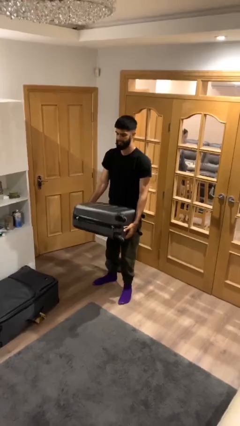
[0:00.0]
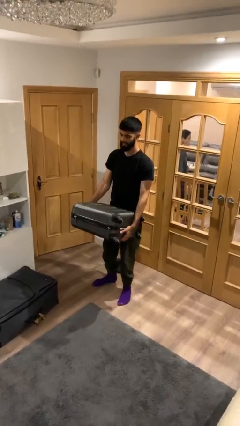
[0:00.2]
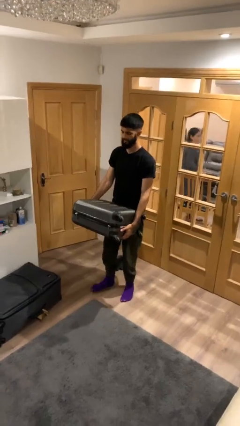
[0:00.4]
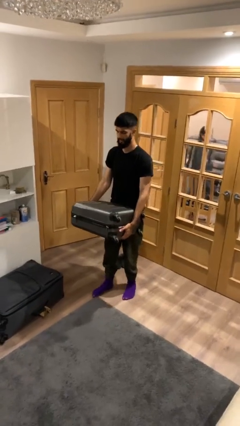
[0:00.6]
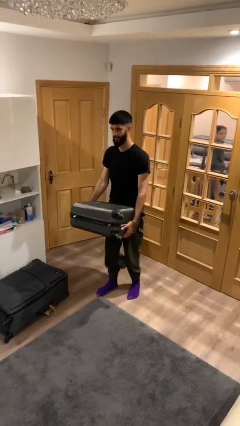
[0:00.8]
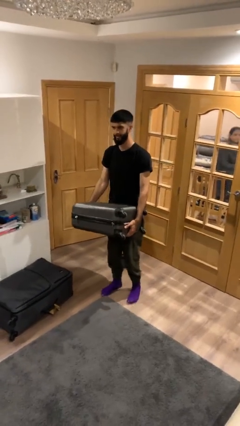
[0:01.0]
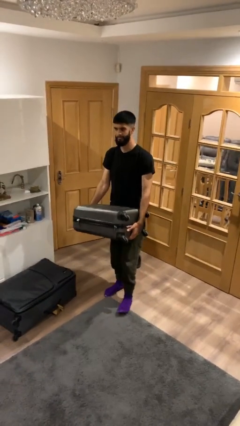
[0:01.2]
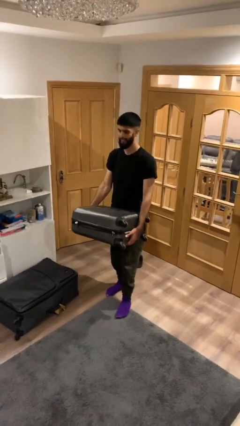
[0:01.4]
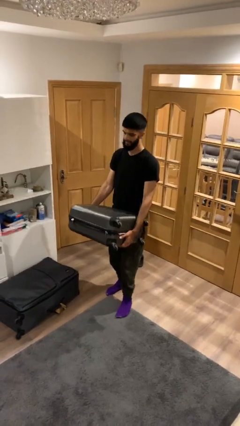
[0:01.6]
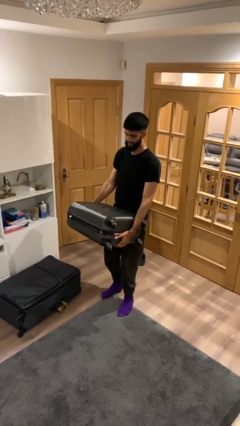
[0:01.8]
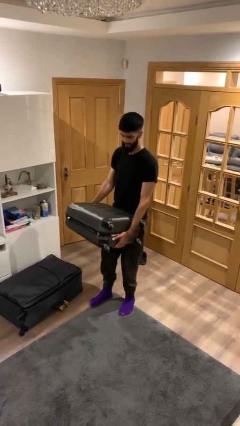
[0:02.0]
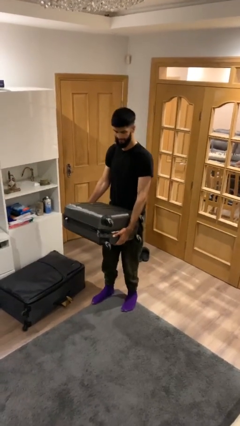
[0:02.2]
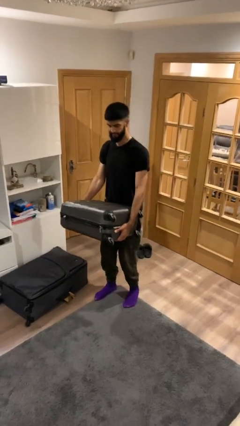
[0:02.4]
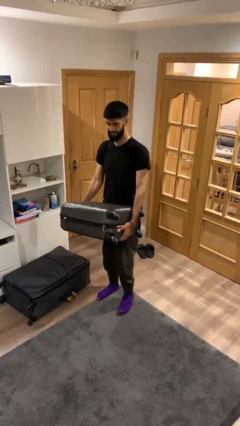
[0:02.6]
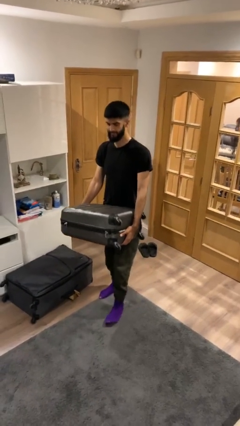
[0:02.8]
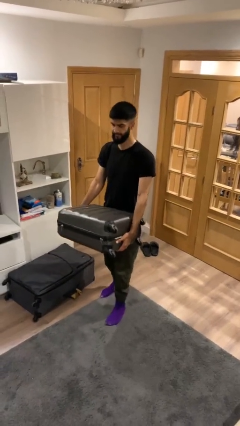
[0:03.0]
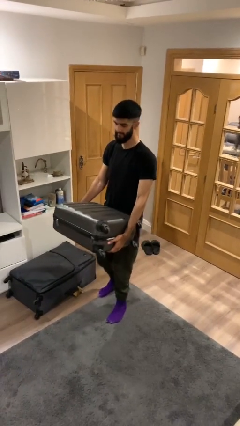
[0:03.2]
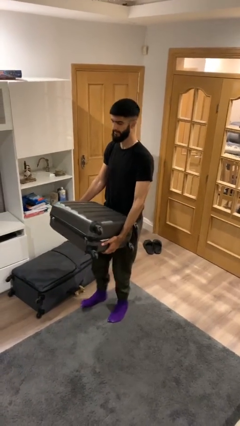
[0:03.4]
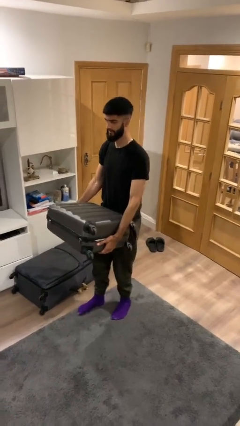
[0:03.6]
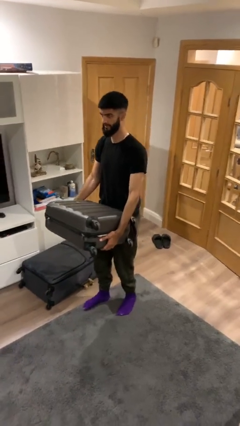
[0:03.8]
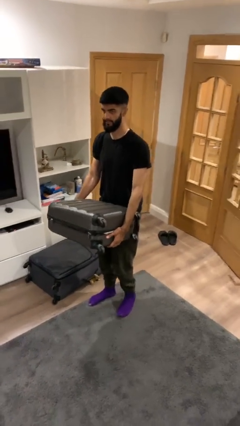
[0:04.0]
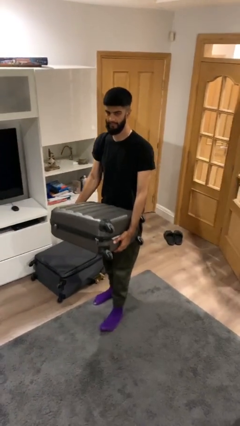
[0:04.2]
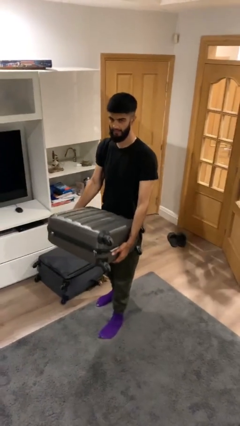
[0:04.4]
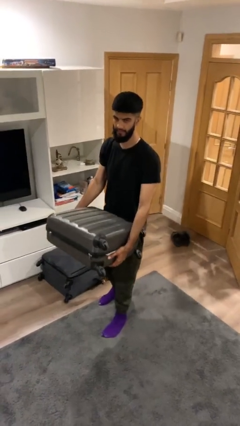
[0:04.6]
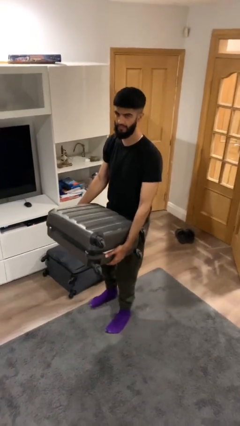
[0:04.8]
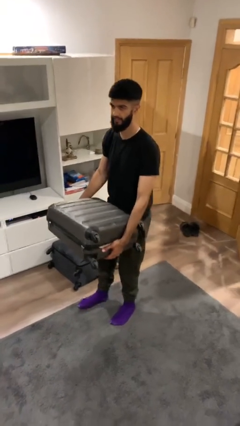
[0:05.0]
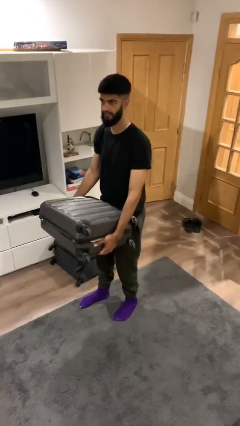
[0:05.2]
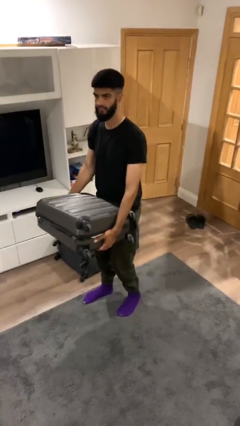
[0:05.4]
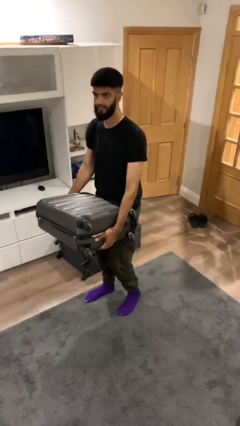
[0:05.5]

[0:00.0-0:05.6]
person carries heavy object

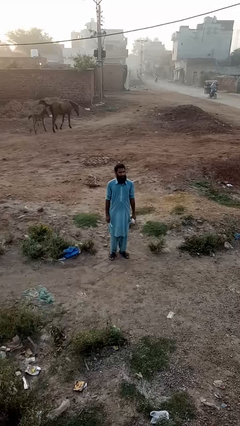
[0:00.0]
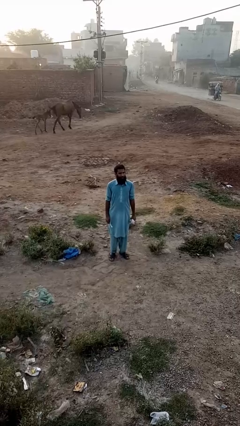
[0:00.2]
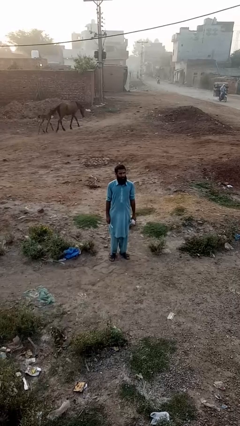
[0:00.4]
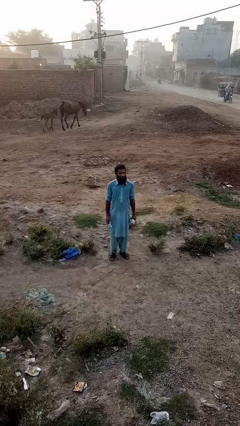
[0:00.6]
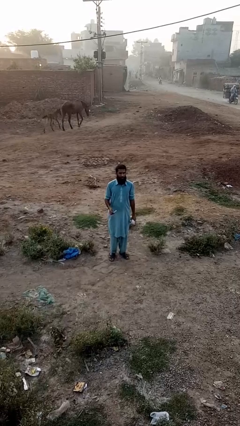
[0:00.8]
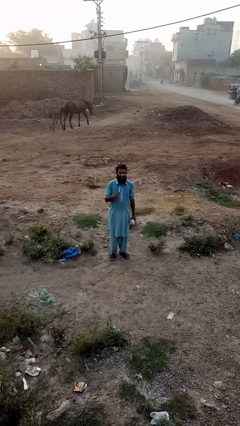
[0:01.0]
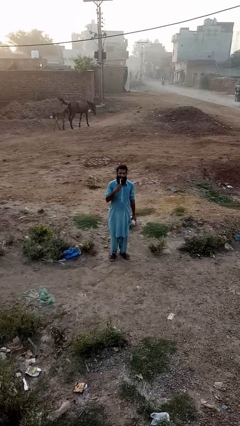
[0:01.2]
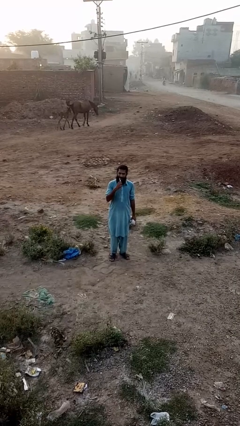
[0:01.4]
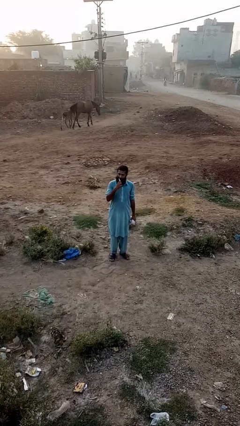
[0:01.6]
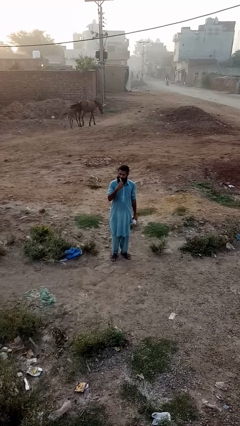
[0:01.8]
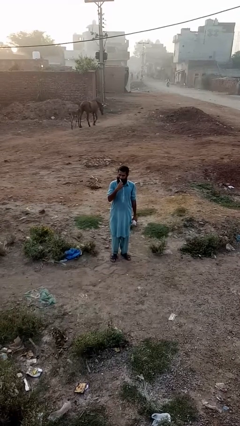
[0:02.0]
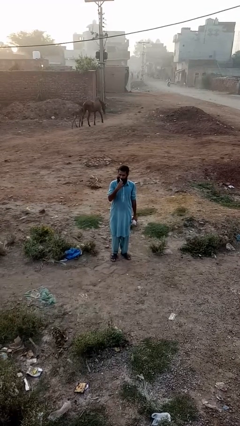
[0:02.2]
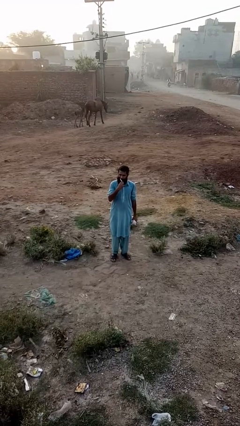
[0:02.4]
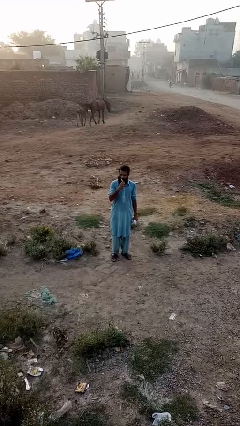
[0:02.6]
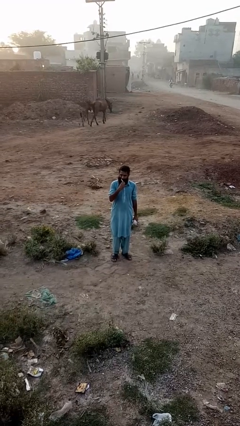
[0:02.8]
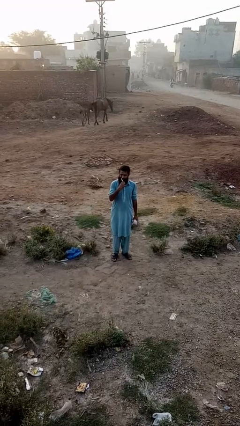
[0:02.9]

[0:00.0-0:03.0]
person brushes teeth

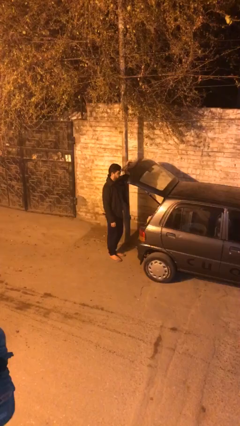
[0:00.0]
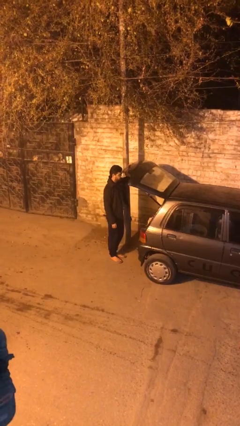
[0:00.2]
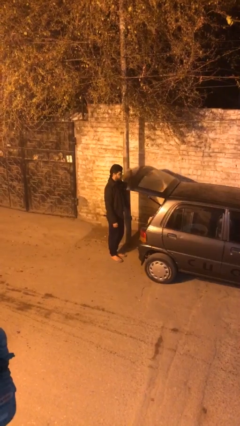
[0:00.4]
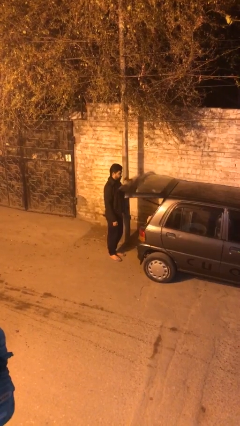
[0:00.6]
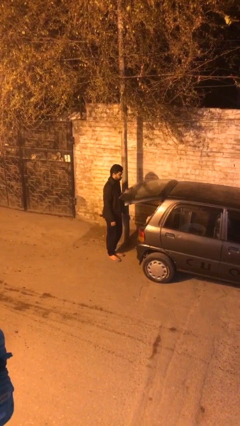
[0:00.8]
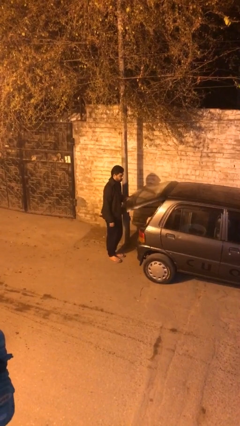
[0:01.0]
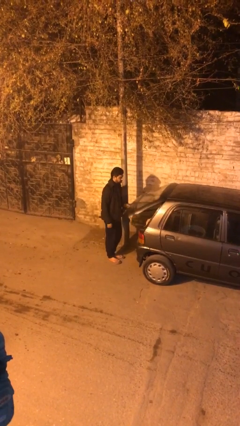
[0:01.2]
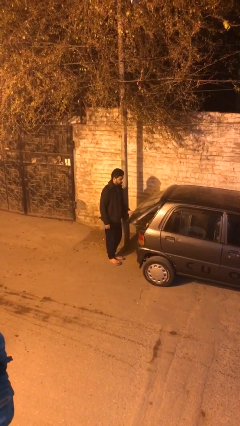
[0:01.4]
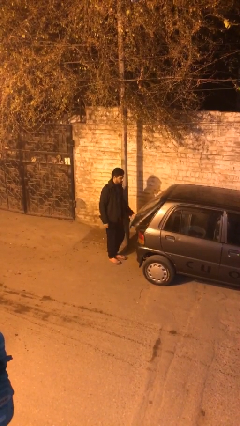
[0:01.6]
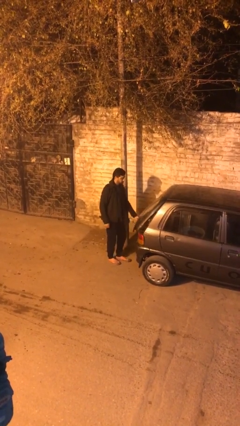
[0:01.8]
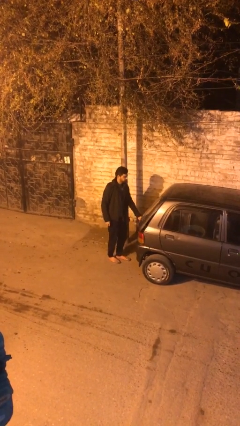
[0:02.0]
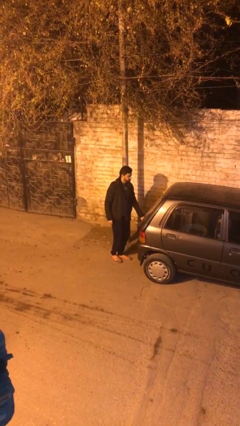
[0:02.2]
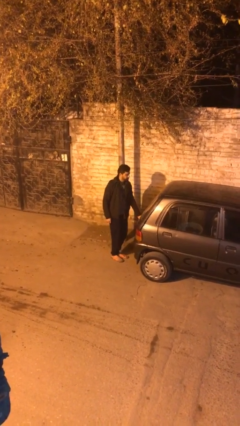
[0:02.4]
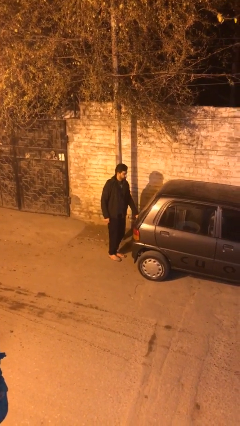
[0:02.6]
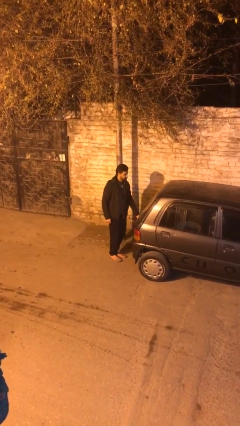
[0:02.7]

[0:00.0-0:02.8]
person closes car trunk

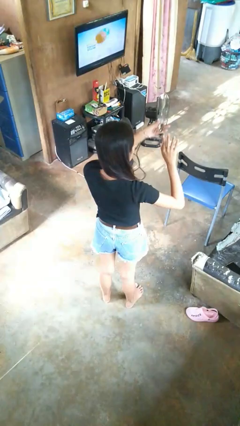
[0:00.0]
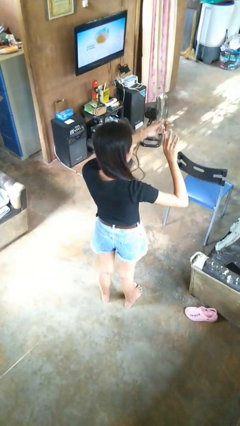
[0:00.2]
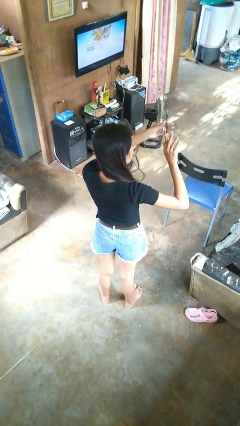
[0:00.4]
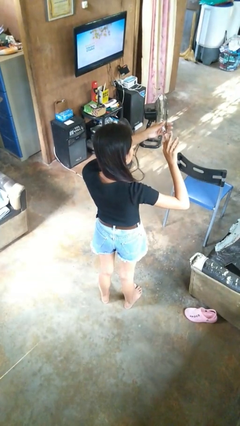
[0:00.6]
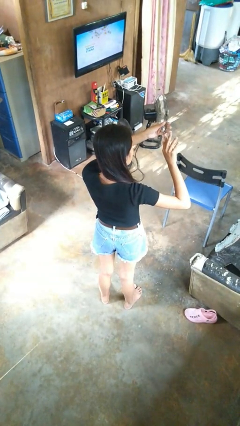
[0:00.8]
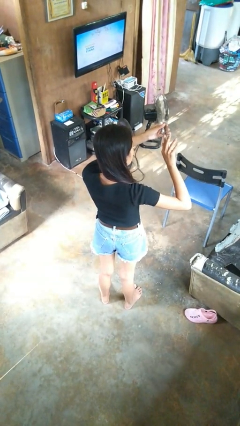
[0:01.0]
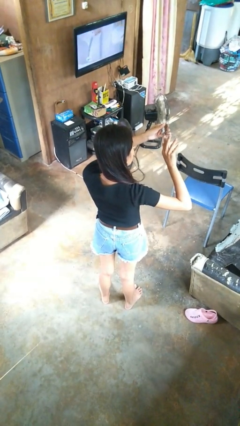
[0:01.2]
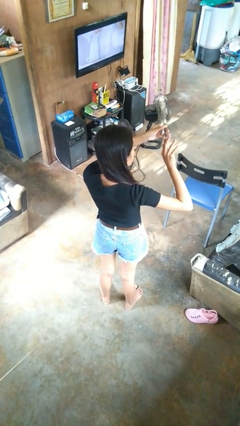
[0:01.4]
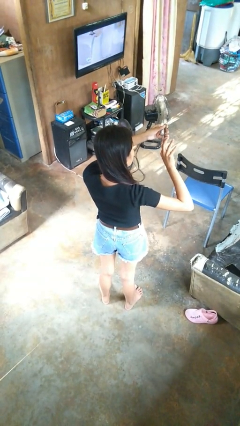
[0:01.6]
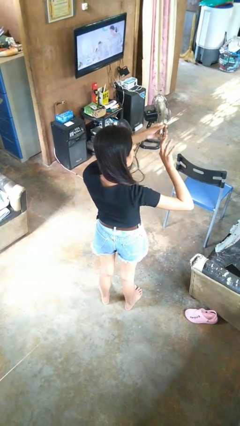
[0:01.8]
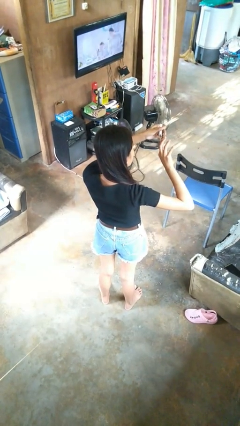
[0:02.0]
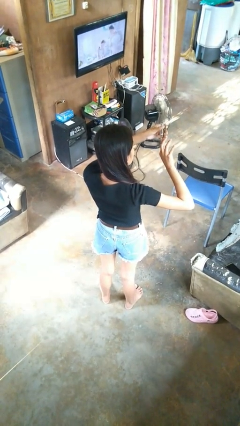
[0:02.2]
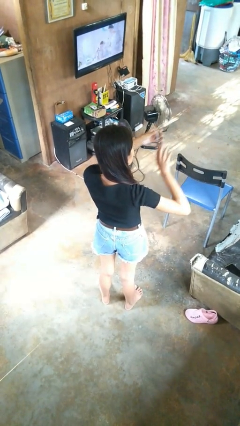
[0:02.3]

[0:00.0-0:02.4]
person clips fingernails

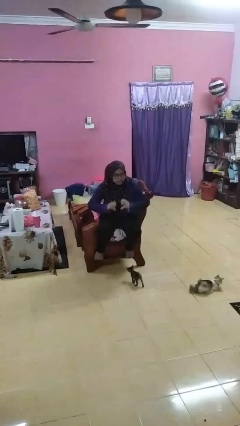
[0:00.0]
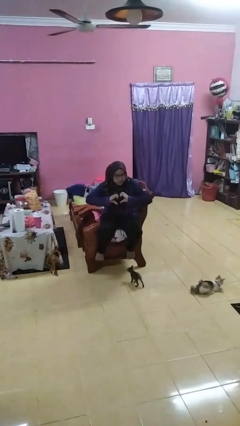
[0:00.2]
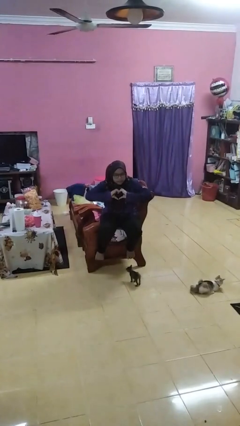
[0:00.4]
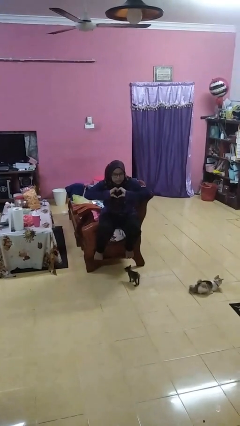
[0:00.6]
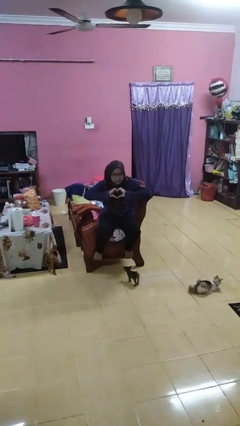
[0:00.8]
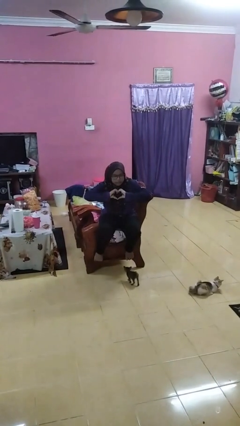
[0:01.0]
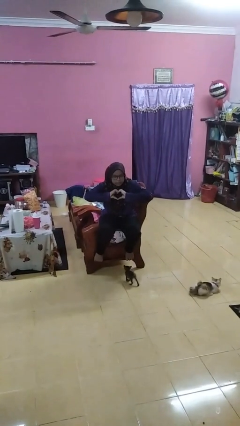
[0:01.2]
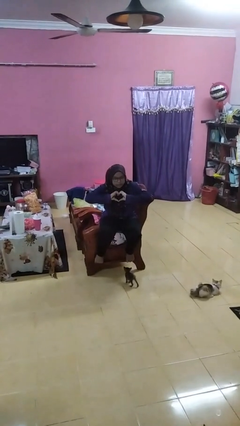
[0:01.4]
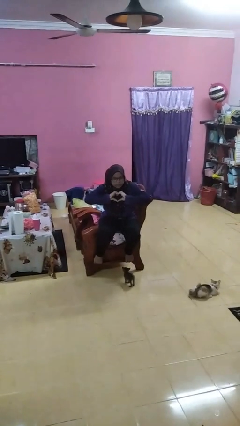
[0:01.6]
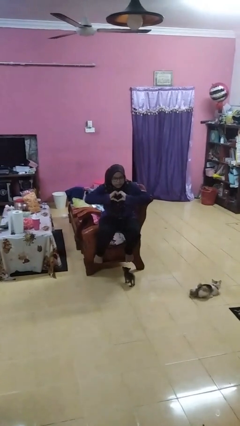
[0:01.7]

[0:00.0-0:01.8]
person gestures heart

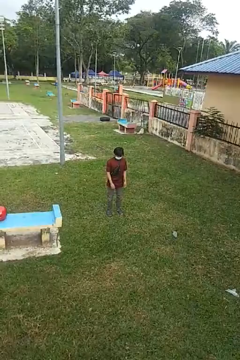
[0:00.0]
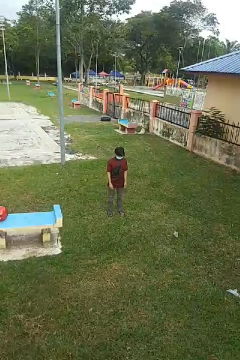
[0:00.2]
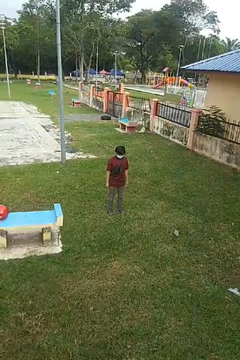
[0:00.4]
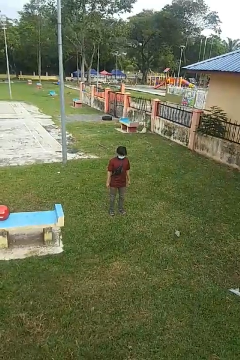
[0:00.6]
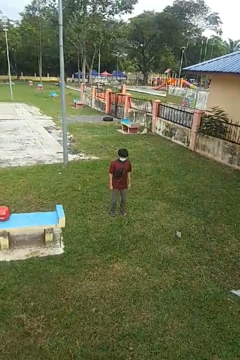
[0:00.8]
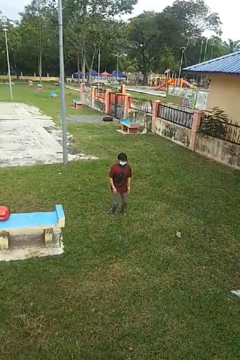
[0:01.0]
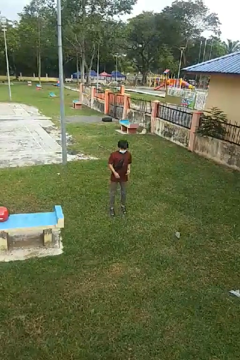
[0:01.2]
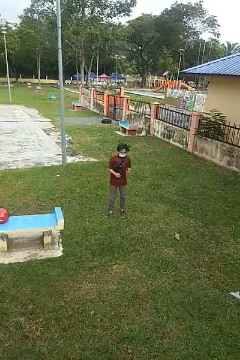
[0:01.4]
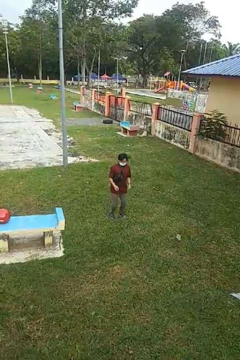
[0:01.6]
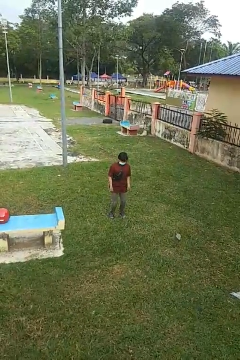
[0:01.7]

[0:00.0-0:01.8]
person jumps
